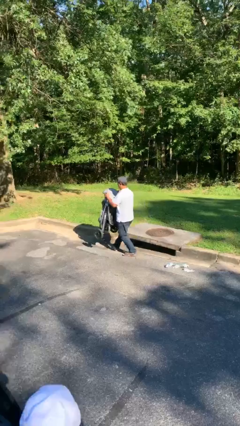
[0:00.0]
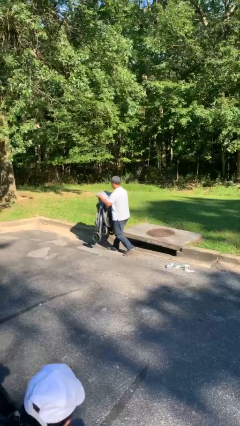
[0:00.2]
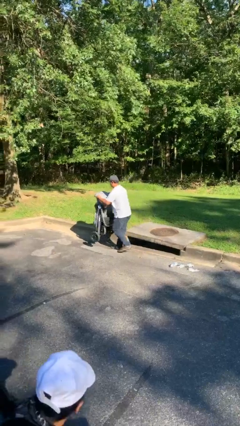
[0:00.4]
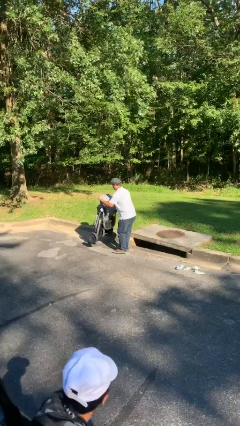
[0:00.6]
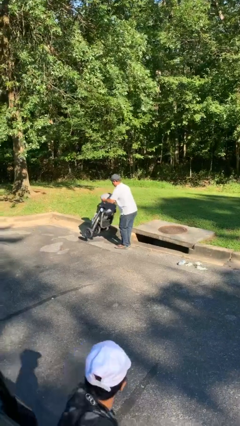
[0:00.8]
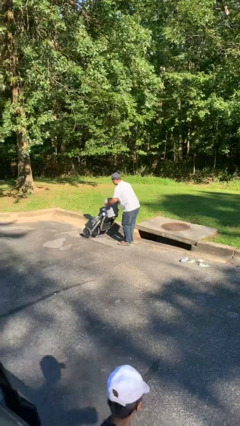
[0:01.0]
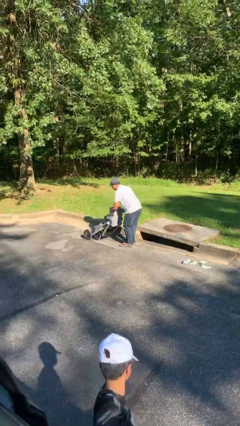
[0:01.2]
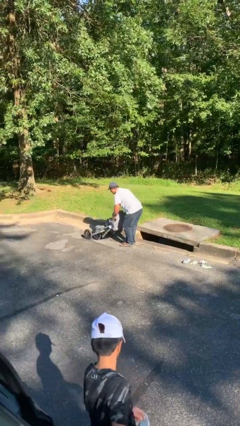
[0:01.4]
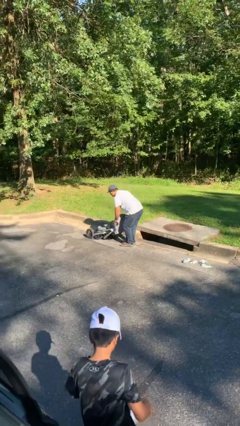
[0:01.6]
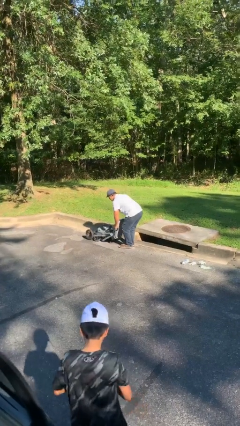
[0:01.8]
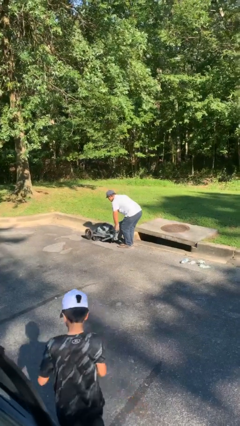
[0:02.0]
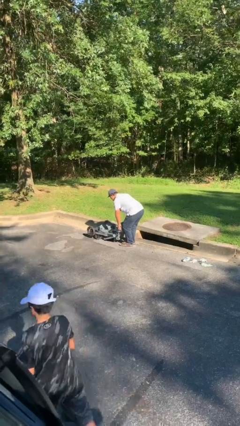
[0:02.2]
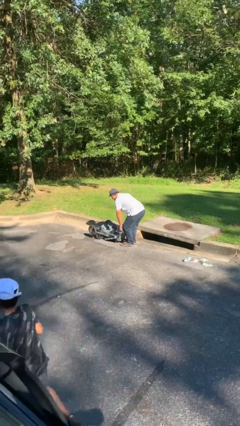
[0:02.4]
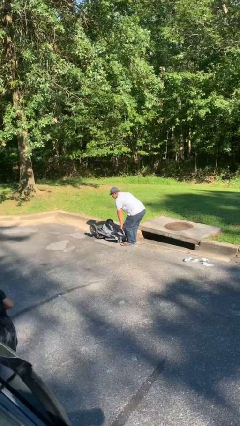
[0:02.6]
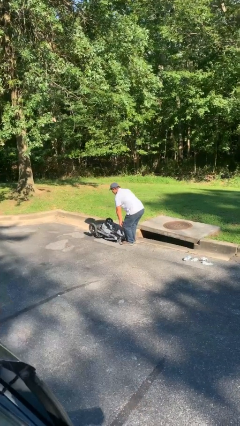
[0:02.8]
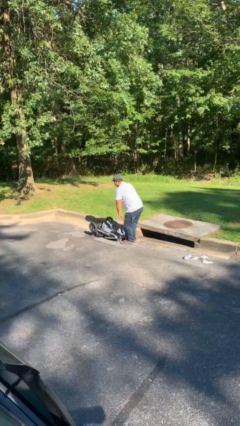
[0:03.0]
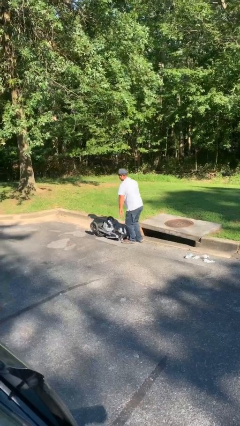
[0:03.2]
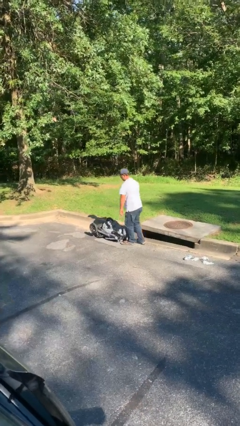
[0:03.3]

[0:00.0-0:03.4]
person puts down object on floor

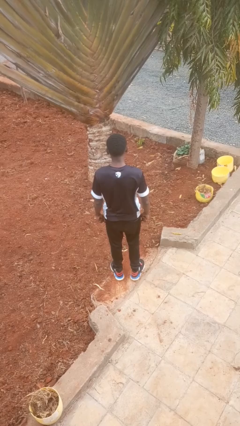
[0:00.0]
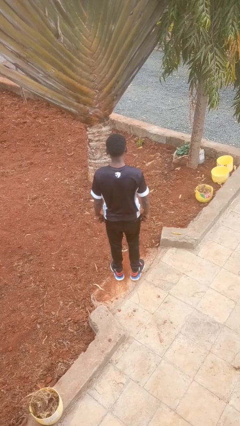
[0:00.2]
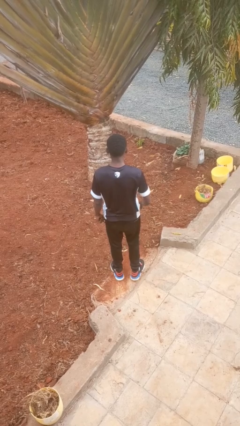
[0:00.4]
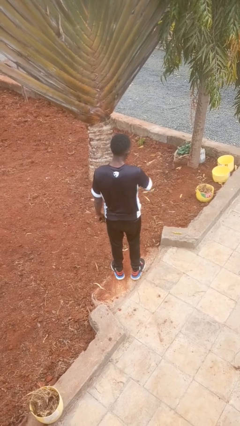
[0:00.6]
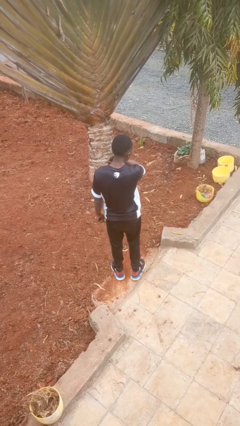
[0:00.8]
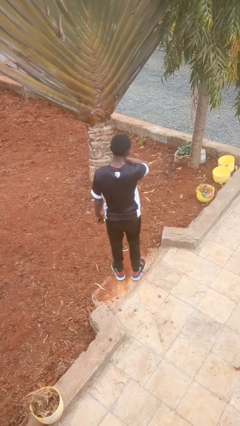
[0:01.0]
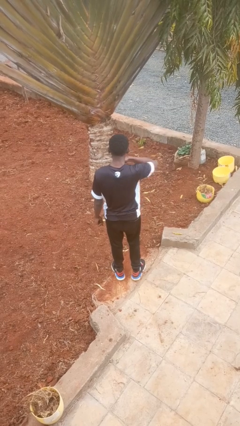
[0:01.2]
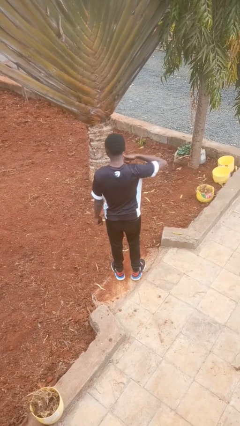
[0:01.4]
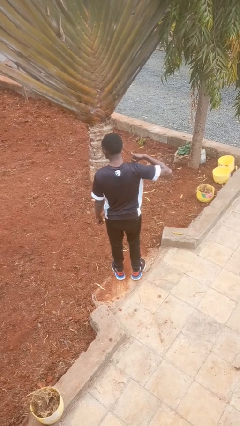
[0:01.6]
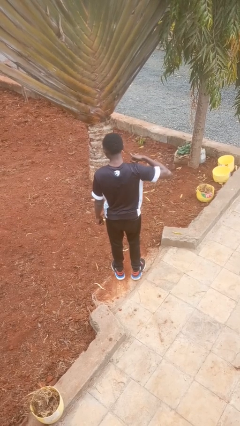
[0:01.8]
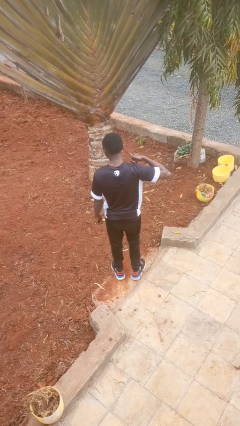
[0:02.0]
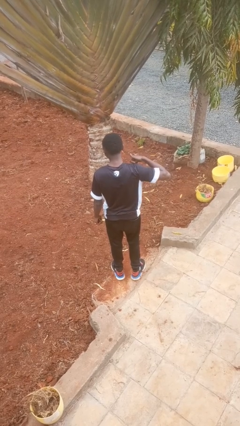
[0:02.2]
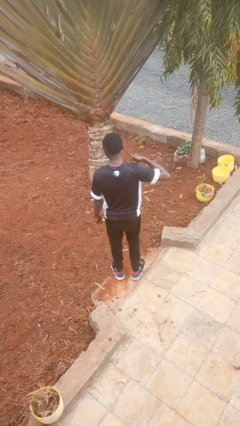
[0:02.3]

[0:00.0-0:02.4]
person gestures cut

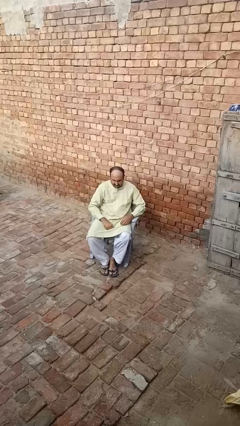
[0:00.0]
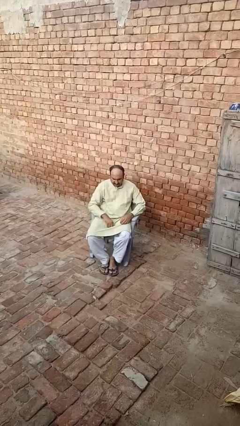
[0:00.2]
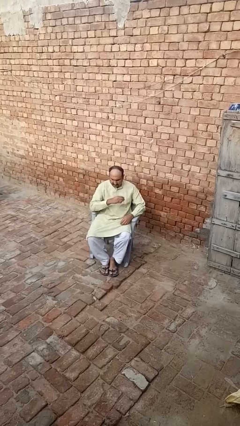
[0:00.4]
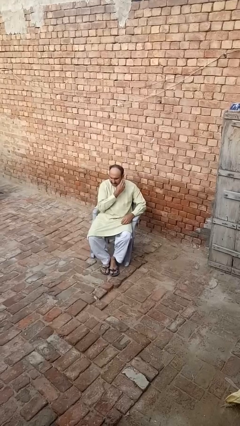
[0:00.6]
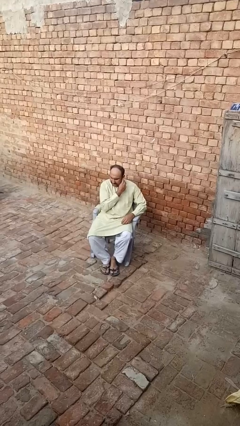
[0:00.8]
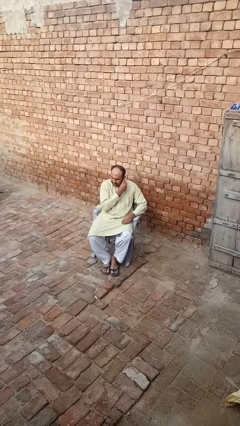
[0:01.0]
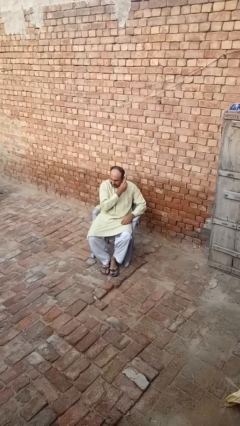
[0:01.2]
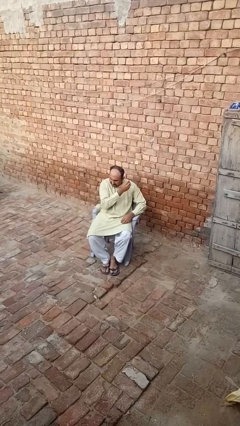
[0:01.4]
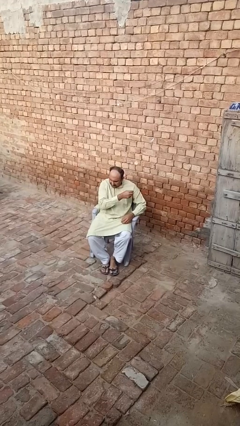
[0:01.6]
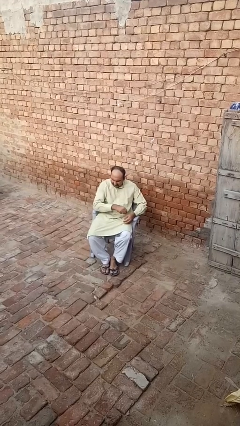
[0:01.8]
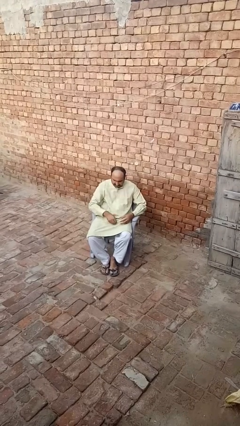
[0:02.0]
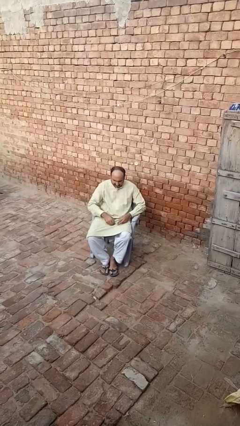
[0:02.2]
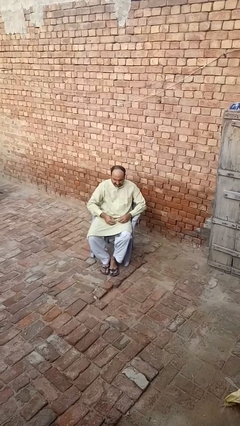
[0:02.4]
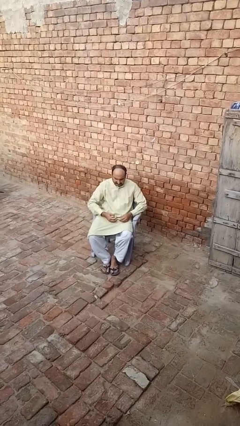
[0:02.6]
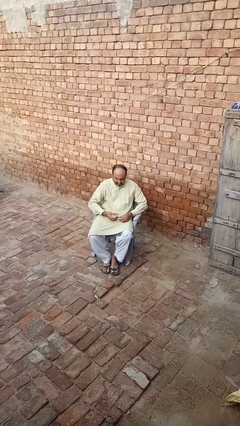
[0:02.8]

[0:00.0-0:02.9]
person takes off earrings

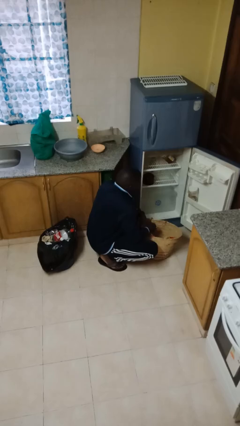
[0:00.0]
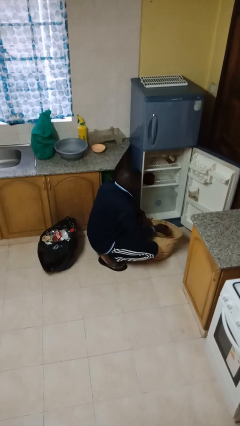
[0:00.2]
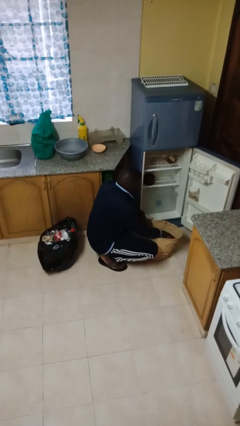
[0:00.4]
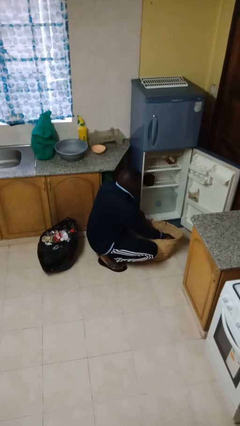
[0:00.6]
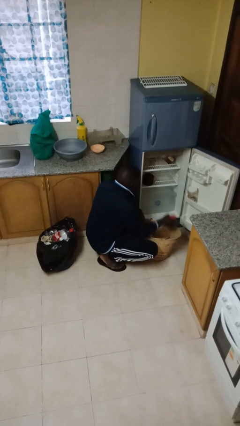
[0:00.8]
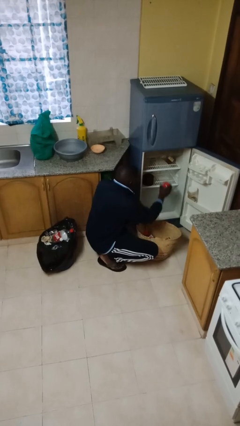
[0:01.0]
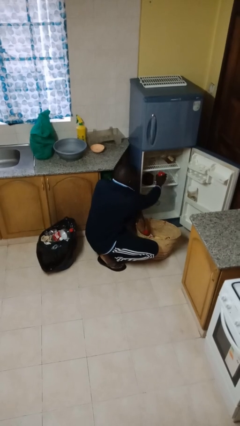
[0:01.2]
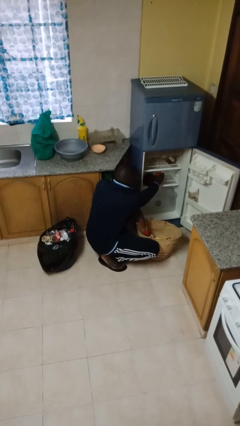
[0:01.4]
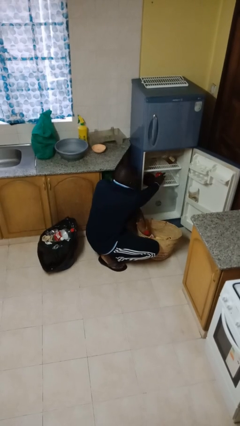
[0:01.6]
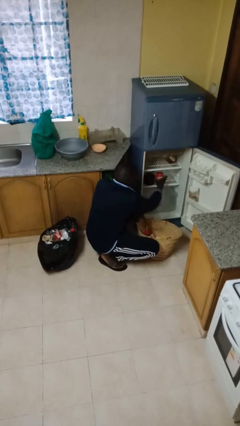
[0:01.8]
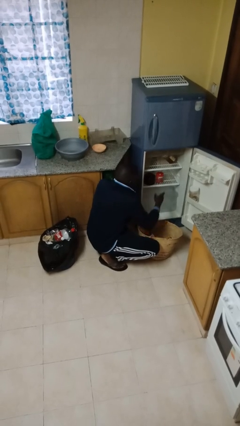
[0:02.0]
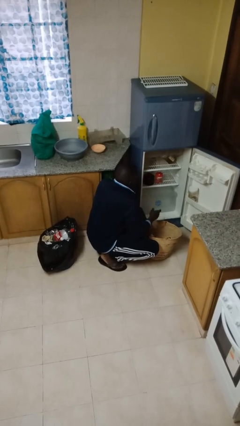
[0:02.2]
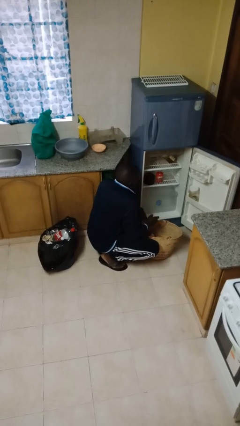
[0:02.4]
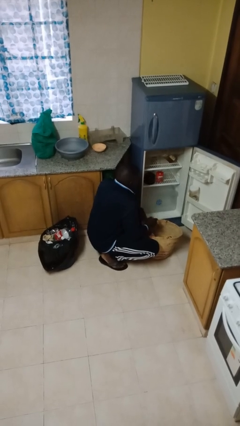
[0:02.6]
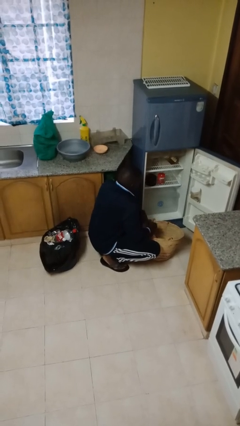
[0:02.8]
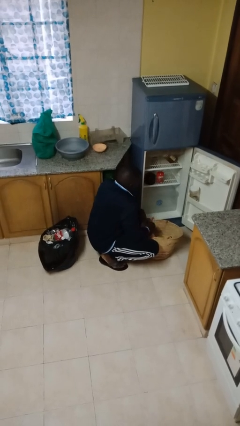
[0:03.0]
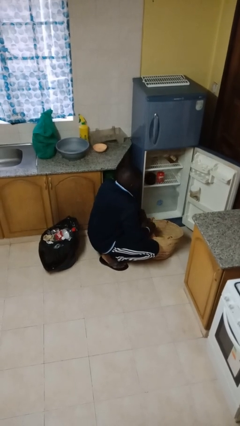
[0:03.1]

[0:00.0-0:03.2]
person loads groceries into refrigerator

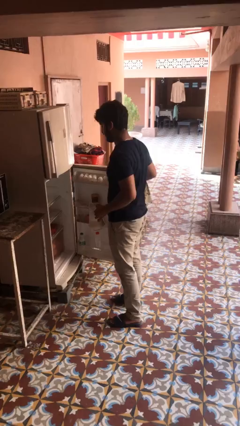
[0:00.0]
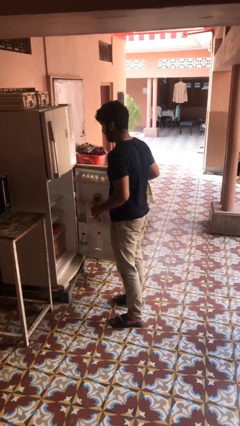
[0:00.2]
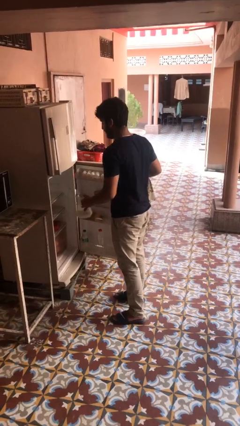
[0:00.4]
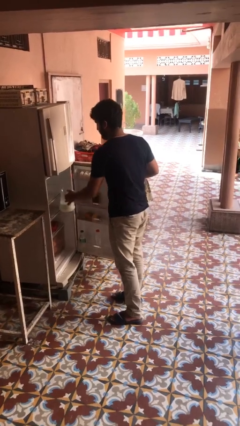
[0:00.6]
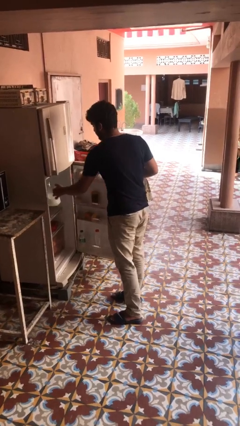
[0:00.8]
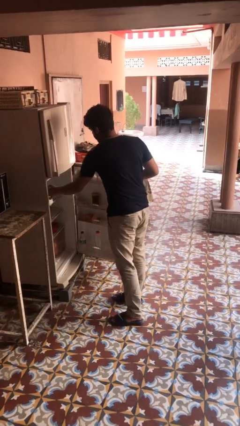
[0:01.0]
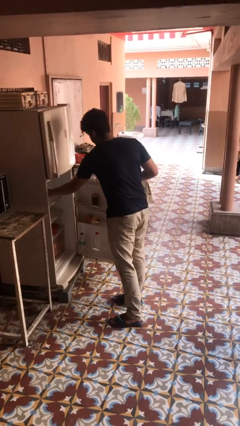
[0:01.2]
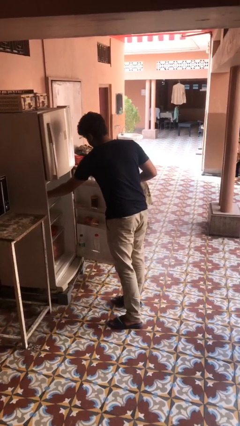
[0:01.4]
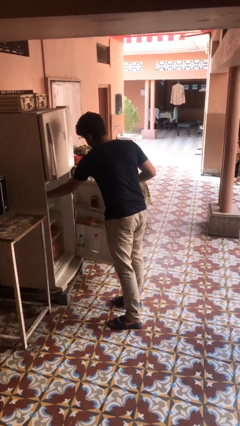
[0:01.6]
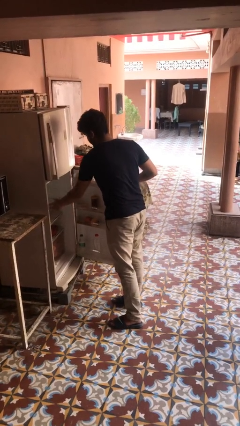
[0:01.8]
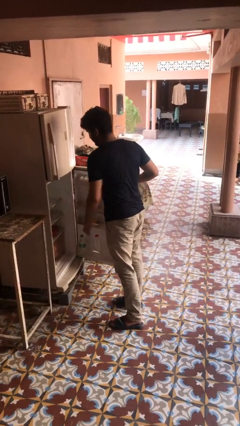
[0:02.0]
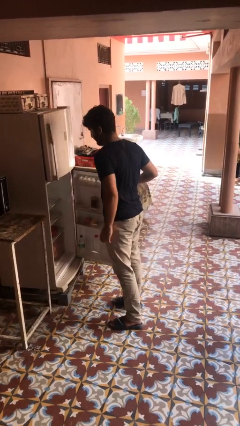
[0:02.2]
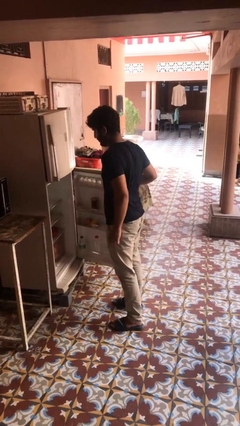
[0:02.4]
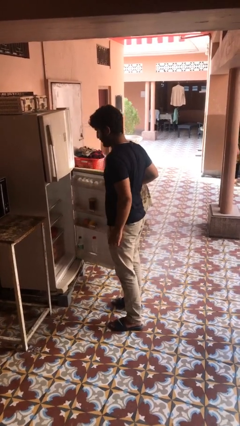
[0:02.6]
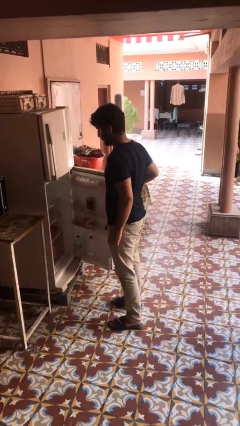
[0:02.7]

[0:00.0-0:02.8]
person puts object into refrigerator

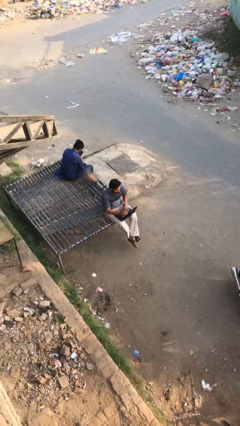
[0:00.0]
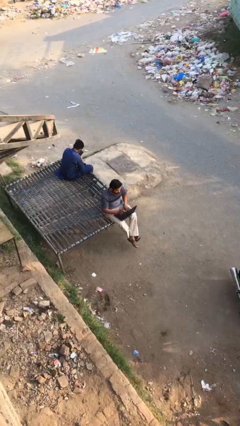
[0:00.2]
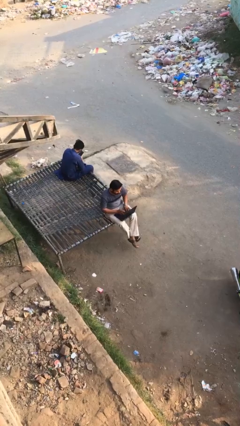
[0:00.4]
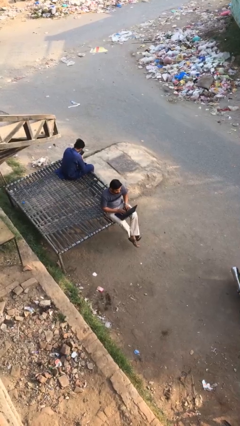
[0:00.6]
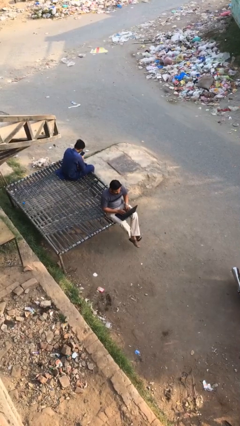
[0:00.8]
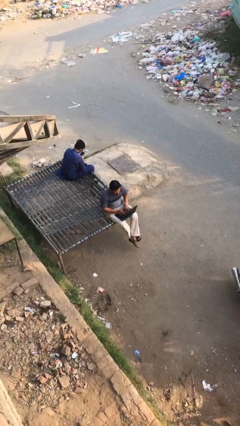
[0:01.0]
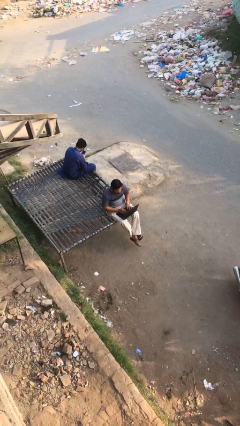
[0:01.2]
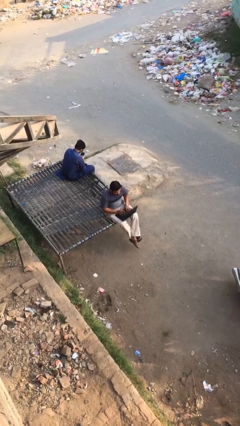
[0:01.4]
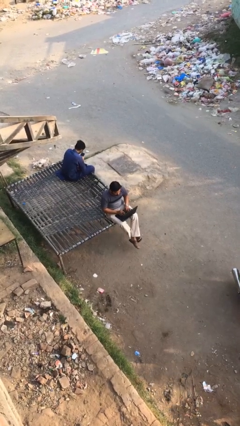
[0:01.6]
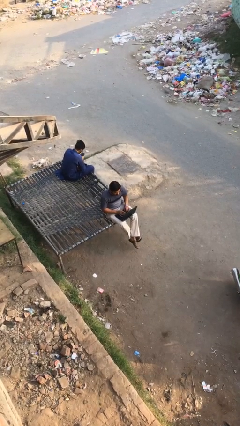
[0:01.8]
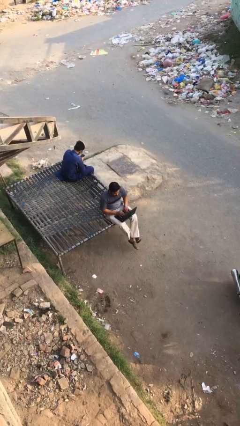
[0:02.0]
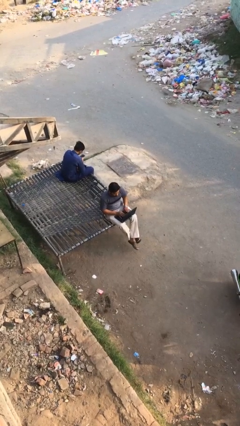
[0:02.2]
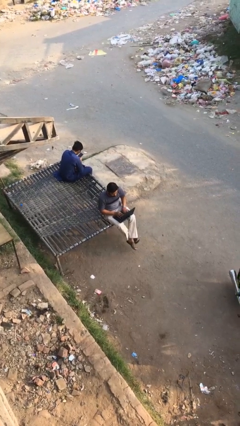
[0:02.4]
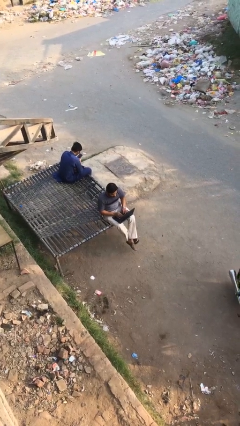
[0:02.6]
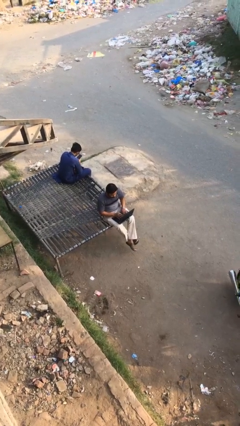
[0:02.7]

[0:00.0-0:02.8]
person interacts with laptop
